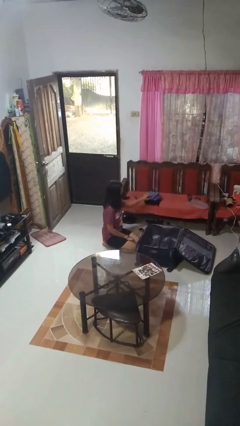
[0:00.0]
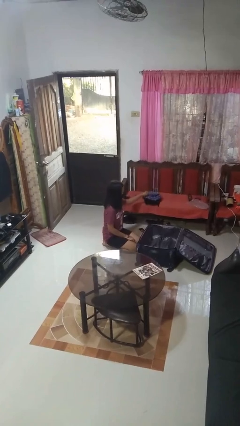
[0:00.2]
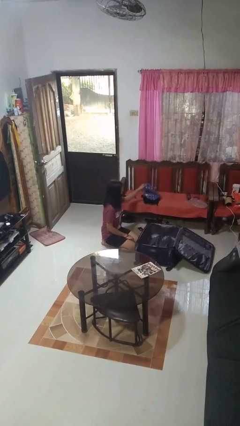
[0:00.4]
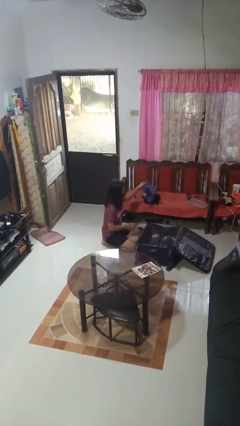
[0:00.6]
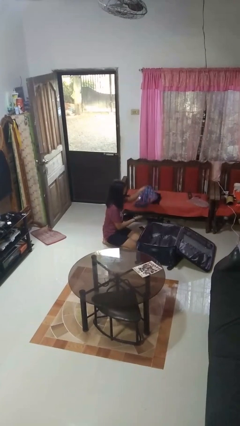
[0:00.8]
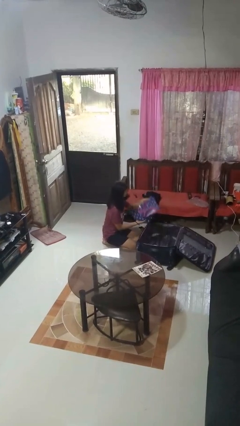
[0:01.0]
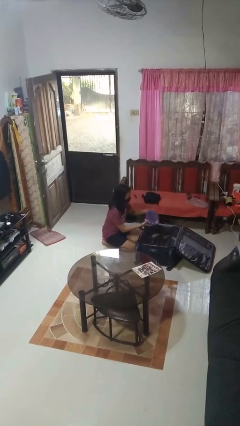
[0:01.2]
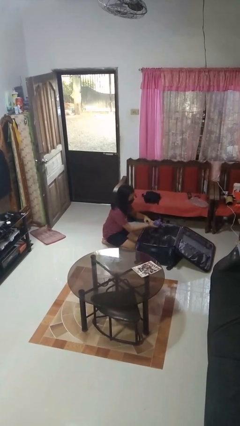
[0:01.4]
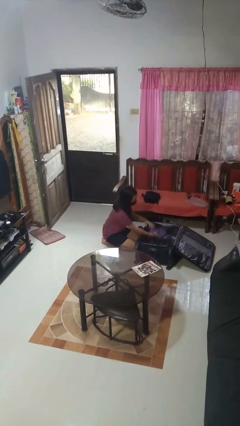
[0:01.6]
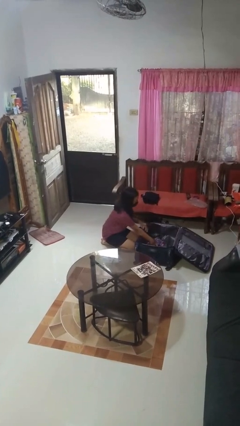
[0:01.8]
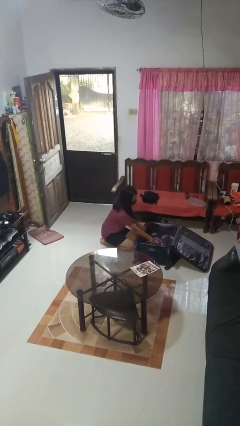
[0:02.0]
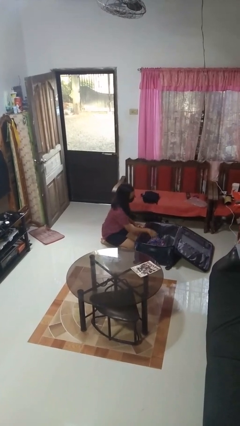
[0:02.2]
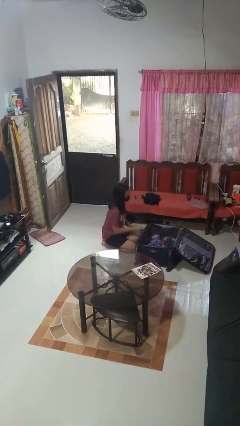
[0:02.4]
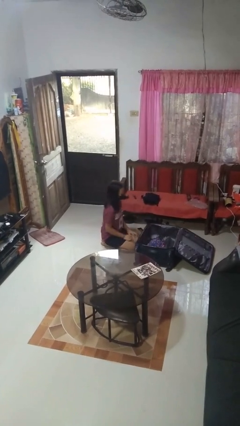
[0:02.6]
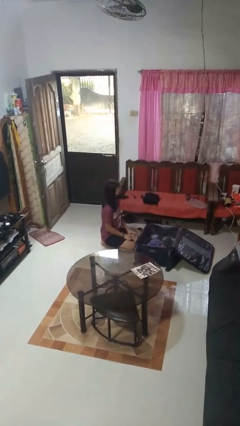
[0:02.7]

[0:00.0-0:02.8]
person loads clothes into suitcase

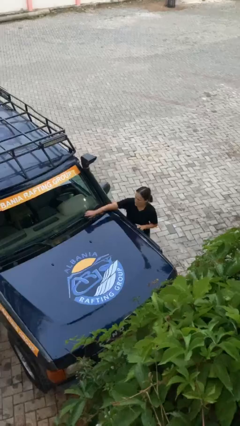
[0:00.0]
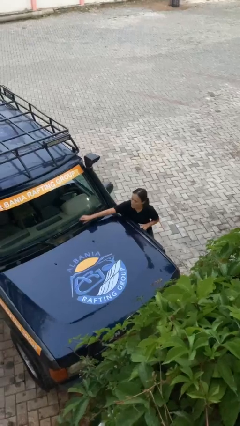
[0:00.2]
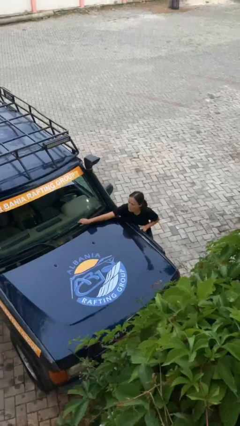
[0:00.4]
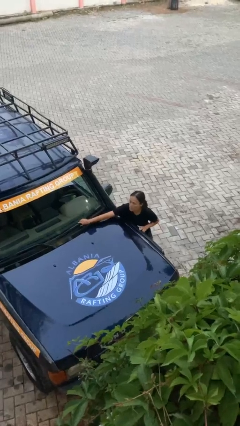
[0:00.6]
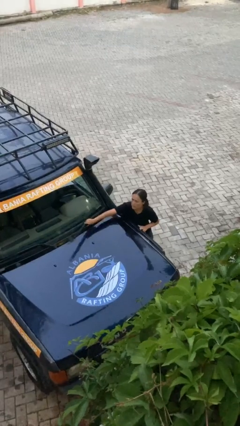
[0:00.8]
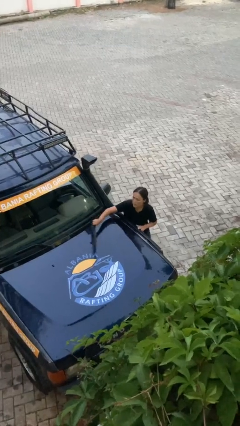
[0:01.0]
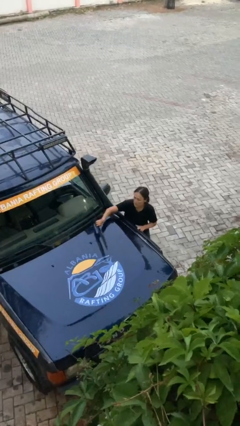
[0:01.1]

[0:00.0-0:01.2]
person flips up car wipers

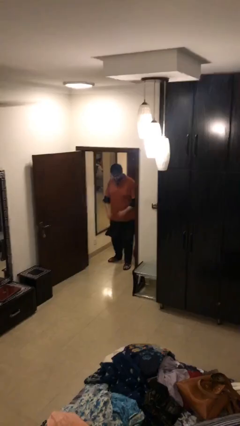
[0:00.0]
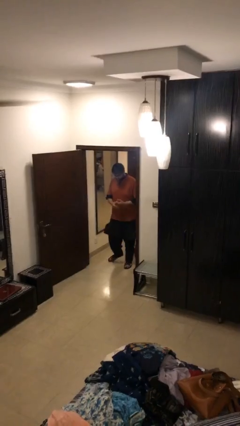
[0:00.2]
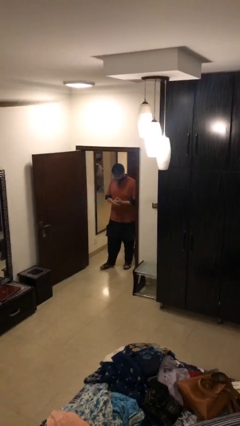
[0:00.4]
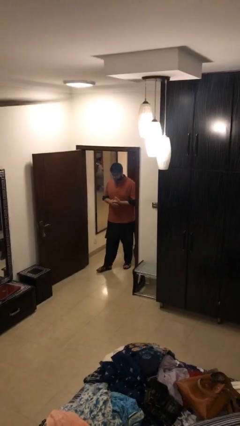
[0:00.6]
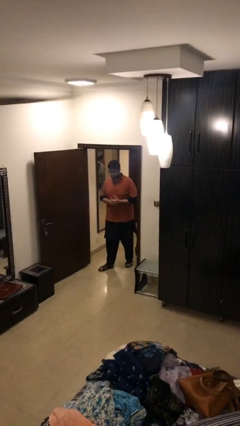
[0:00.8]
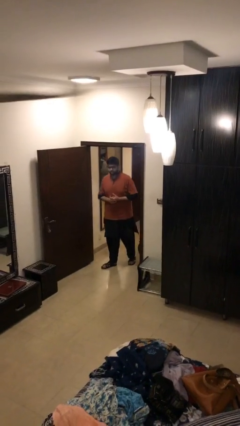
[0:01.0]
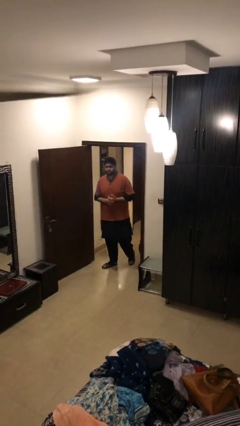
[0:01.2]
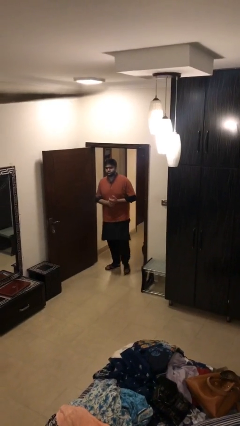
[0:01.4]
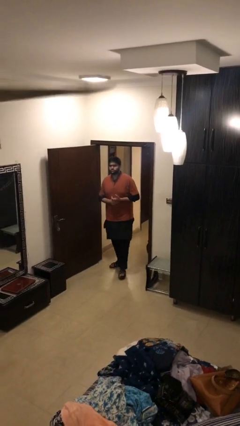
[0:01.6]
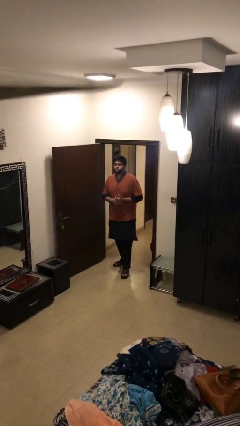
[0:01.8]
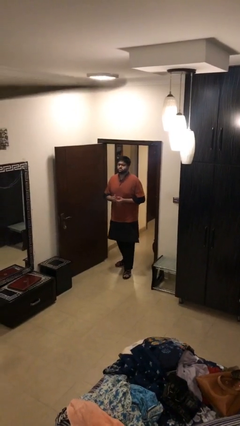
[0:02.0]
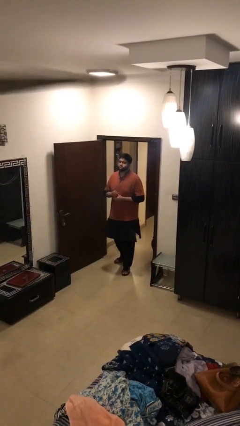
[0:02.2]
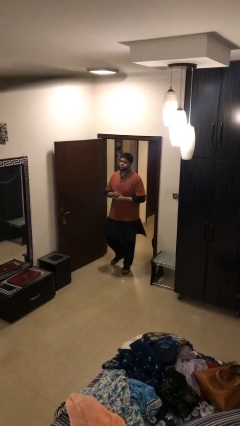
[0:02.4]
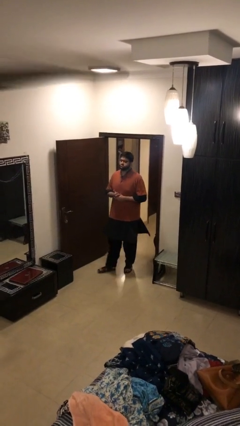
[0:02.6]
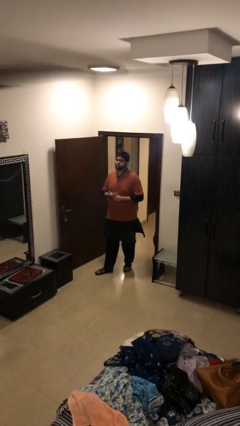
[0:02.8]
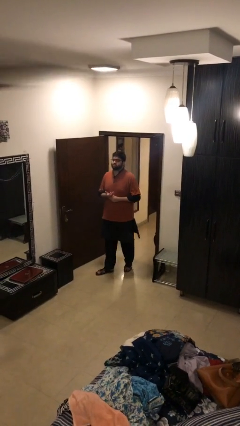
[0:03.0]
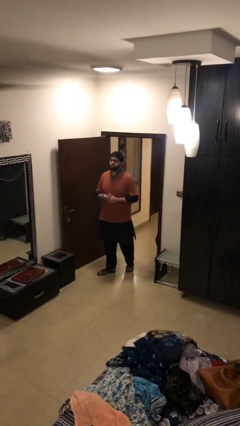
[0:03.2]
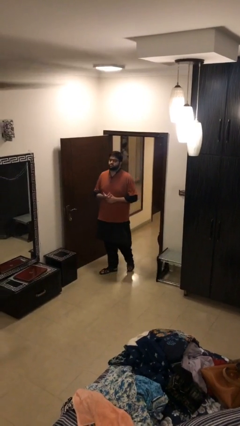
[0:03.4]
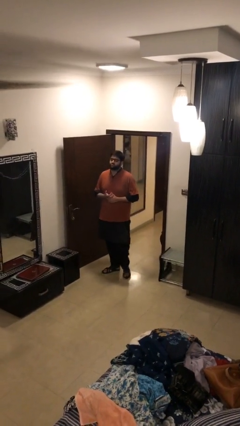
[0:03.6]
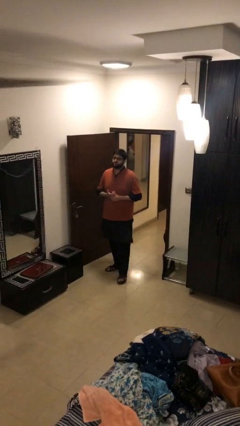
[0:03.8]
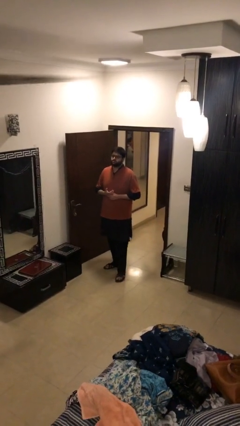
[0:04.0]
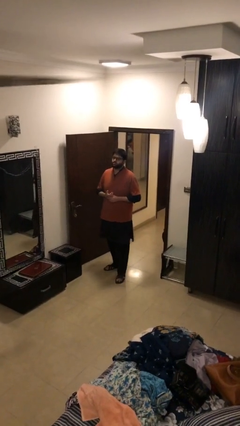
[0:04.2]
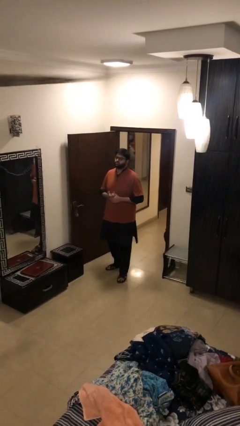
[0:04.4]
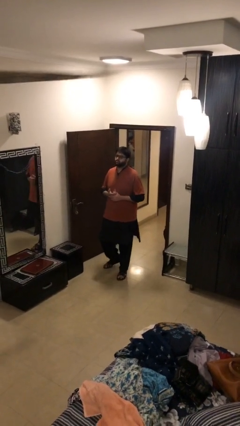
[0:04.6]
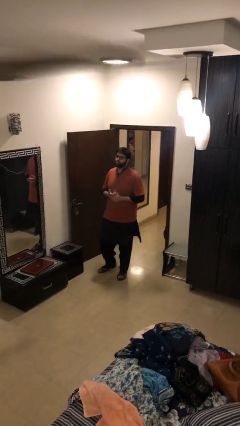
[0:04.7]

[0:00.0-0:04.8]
person enters scene through structure

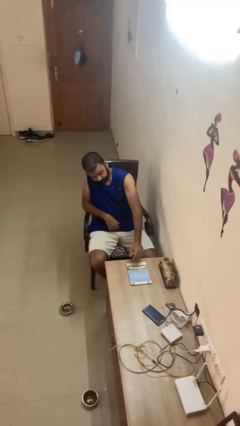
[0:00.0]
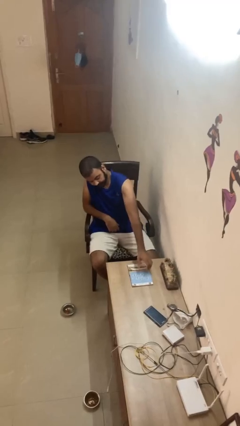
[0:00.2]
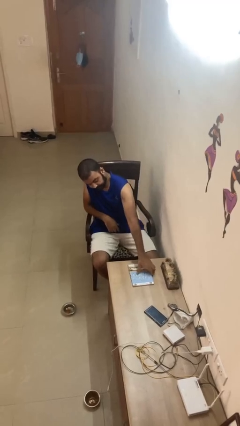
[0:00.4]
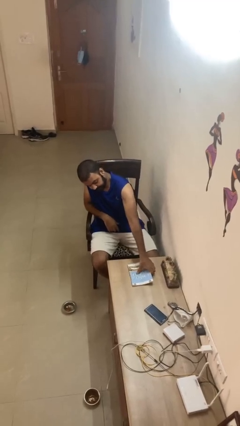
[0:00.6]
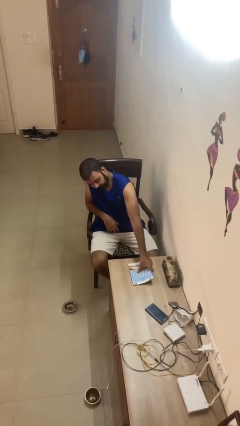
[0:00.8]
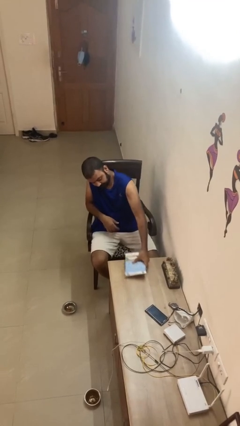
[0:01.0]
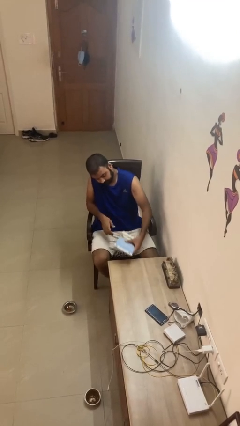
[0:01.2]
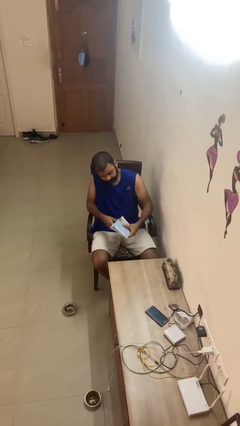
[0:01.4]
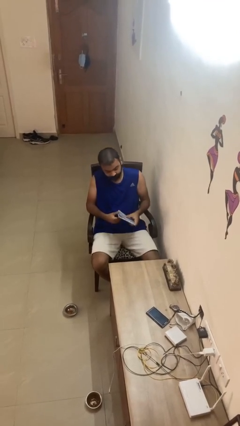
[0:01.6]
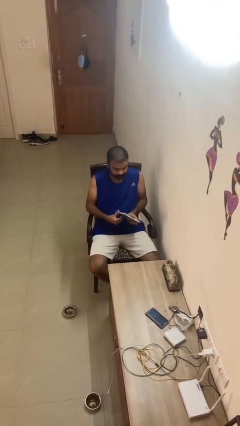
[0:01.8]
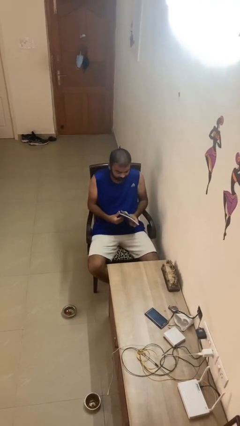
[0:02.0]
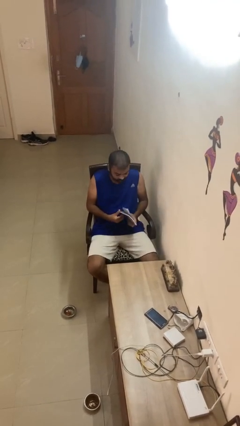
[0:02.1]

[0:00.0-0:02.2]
person picks up object from table

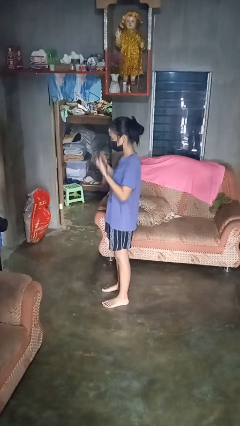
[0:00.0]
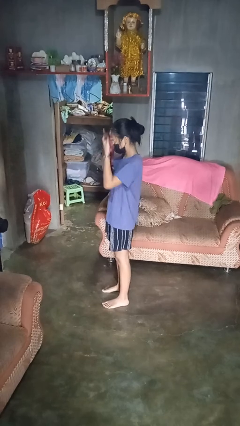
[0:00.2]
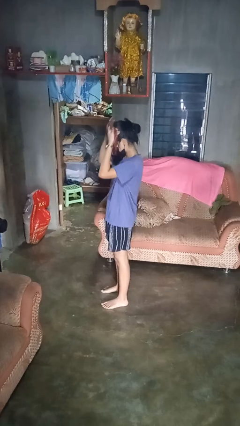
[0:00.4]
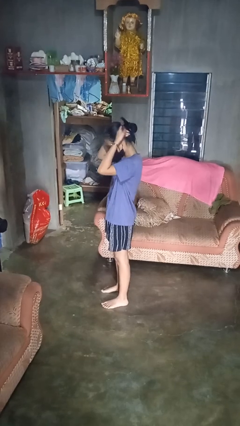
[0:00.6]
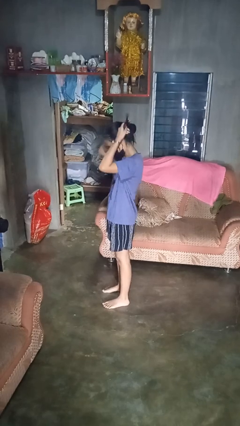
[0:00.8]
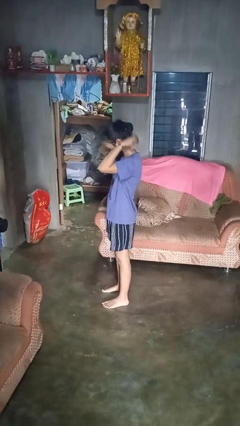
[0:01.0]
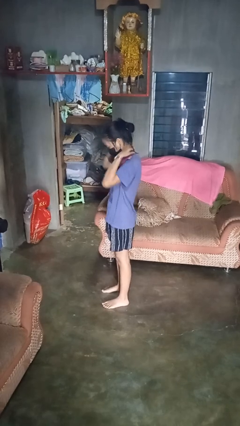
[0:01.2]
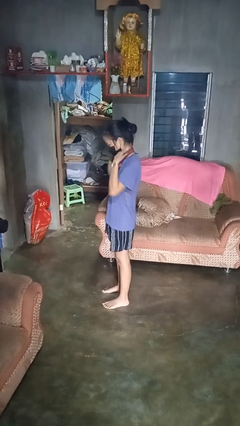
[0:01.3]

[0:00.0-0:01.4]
person puts on necklace

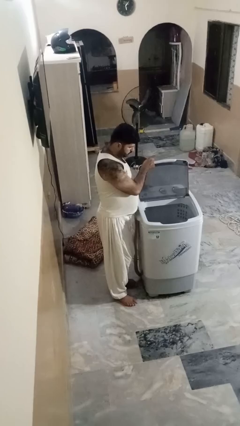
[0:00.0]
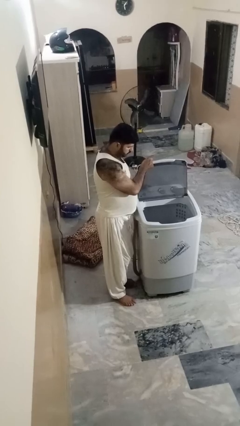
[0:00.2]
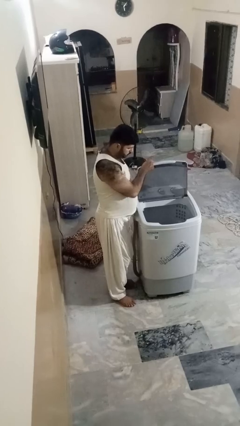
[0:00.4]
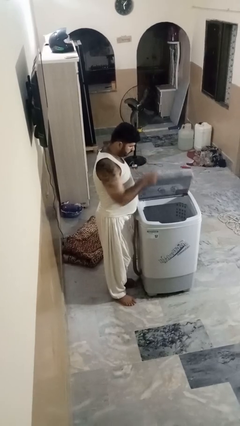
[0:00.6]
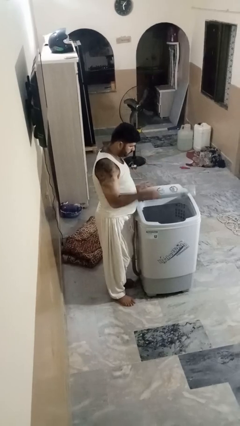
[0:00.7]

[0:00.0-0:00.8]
person closes clothes washer

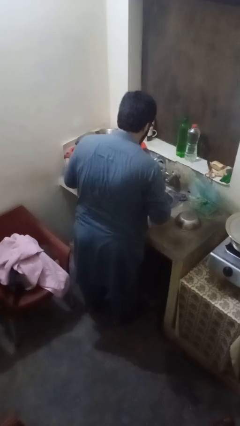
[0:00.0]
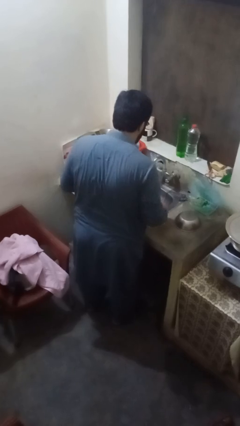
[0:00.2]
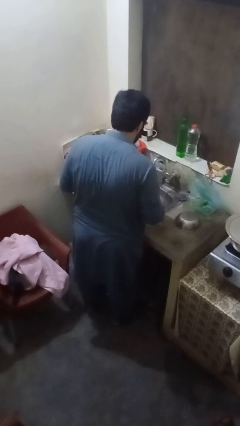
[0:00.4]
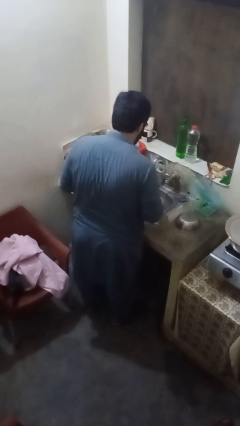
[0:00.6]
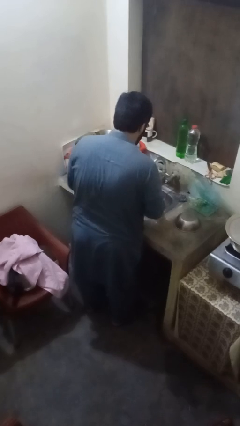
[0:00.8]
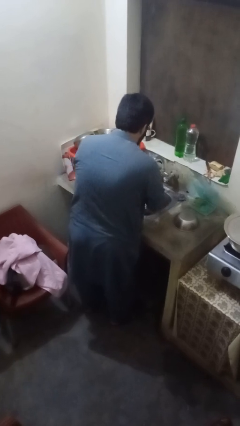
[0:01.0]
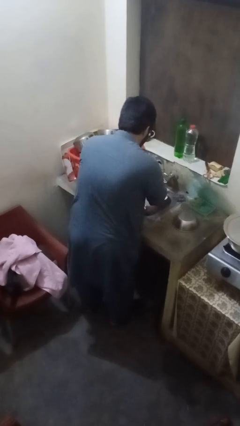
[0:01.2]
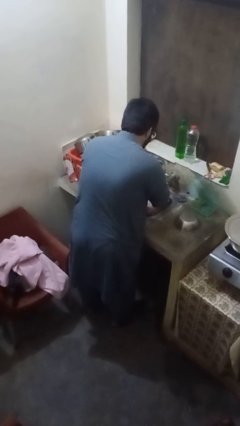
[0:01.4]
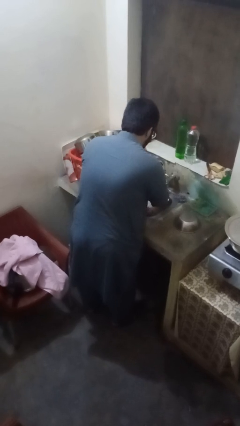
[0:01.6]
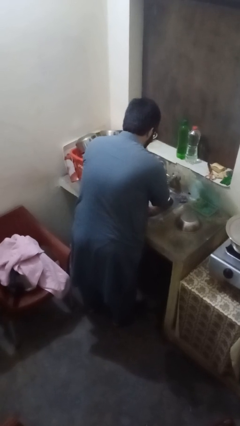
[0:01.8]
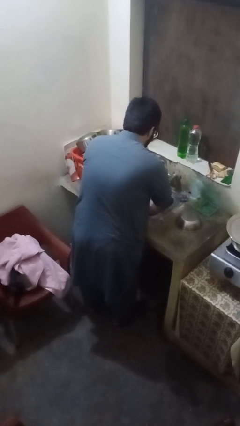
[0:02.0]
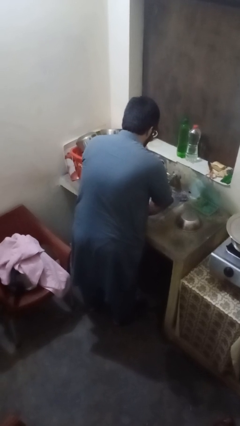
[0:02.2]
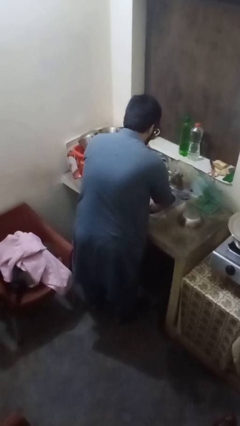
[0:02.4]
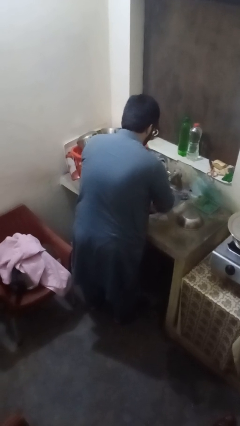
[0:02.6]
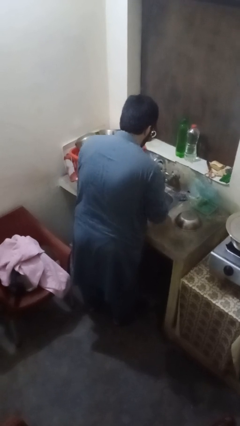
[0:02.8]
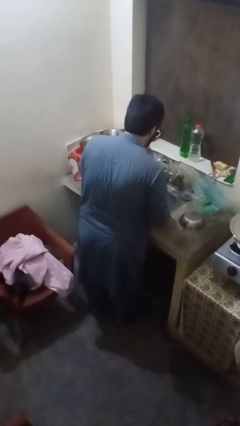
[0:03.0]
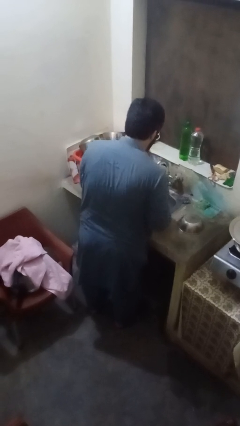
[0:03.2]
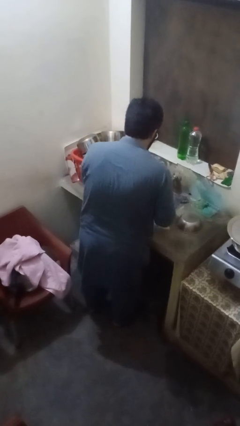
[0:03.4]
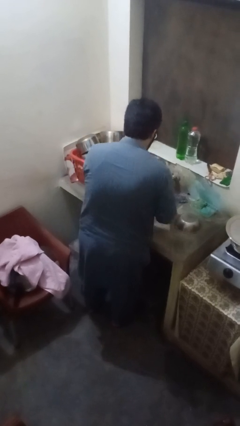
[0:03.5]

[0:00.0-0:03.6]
person washes dish

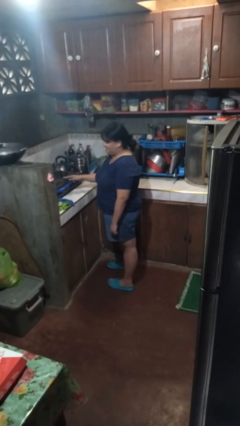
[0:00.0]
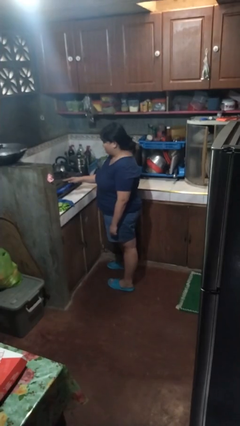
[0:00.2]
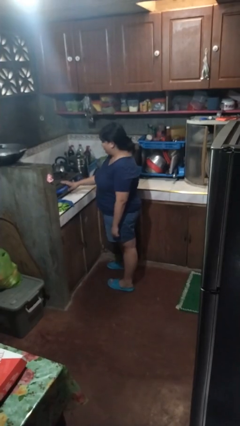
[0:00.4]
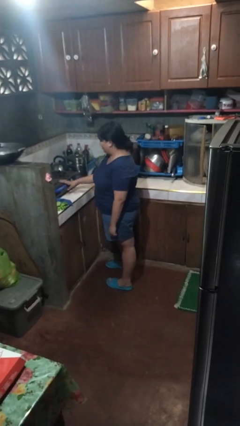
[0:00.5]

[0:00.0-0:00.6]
person burns hand
